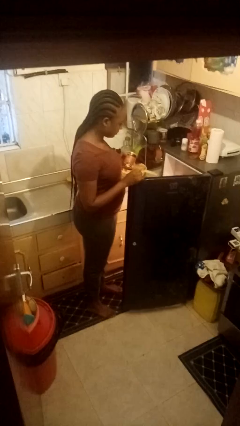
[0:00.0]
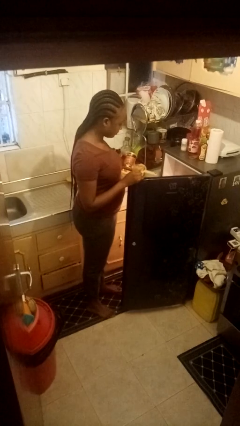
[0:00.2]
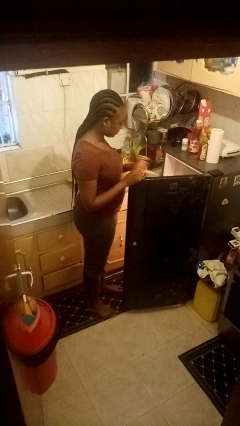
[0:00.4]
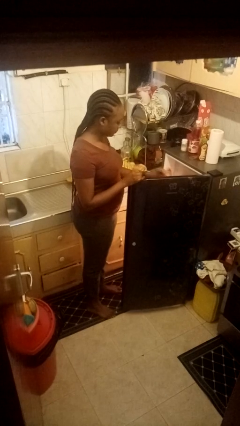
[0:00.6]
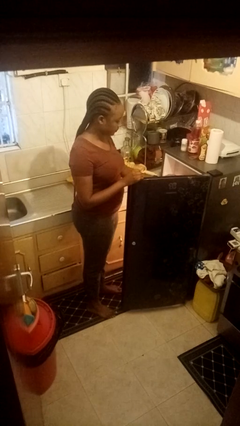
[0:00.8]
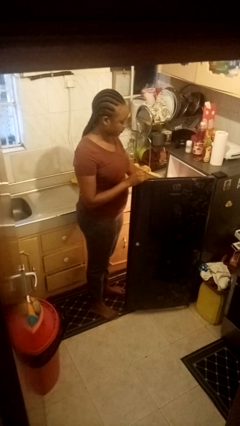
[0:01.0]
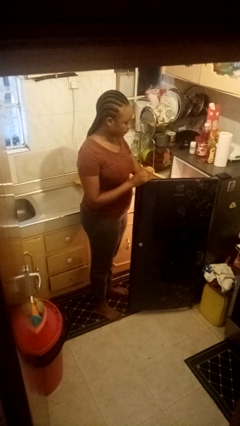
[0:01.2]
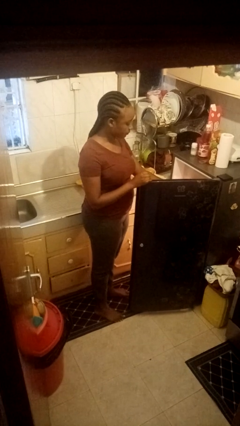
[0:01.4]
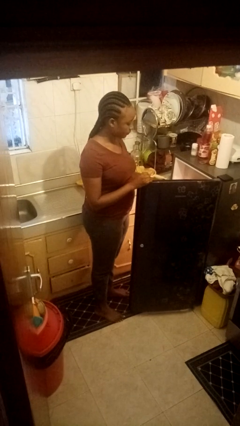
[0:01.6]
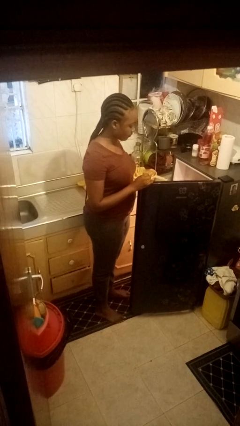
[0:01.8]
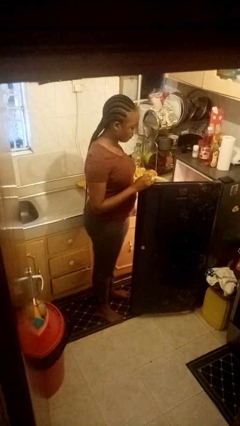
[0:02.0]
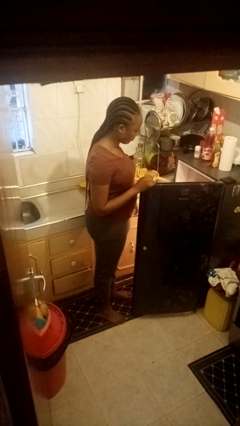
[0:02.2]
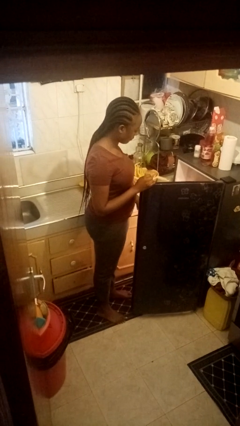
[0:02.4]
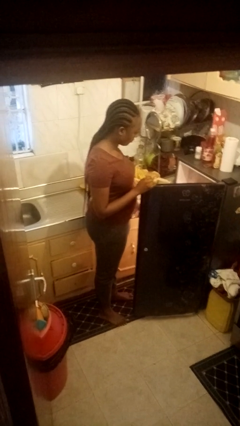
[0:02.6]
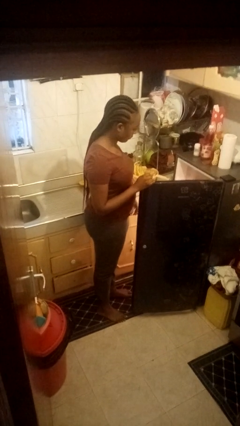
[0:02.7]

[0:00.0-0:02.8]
person puts object into refrigerator

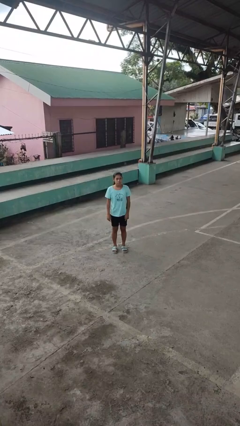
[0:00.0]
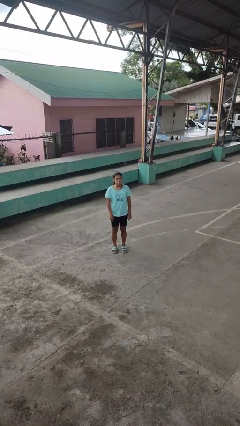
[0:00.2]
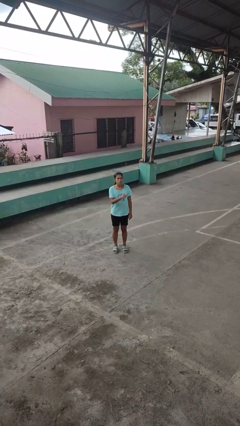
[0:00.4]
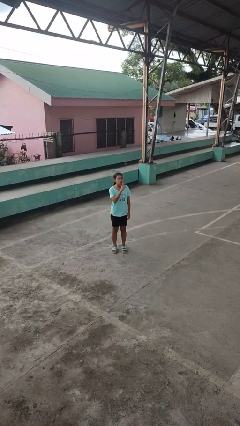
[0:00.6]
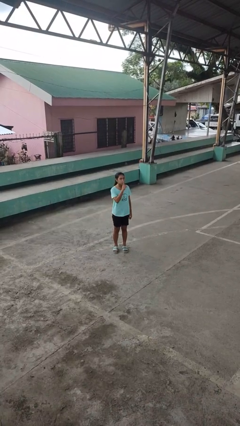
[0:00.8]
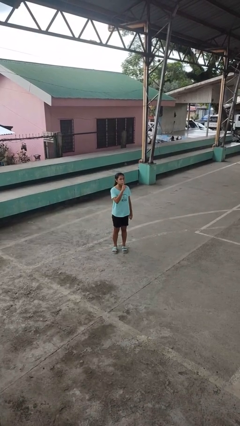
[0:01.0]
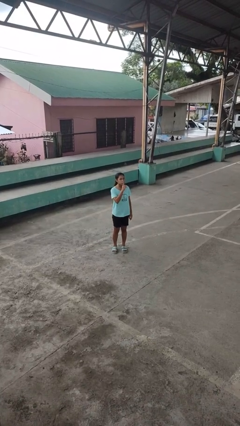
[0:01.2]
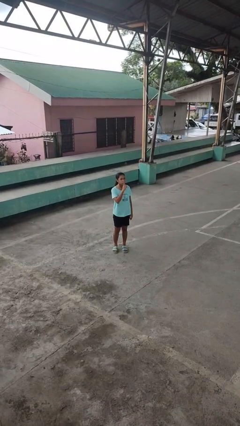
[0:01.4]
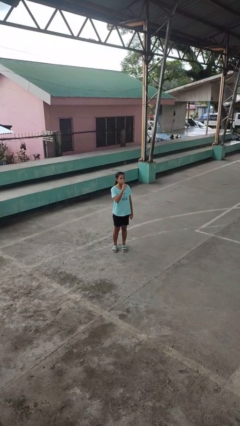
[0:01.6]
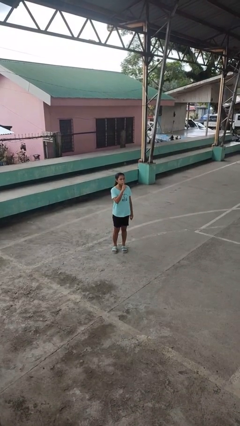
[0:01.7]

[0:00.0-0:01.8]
person gestures be quiet

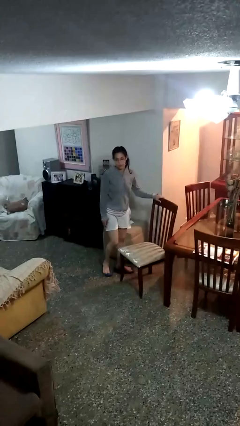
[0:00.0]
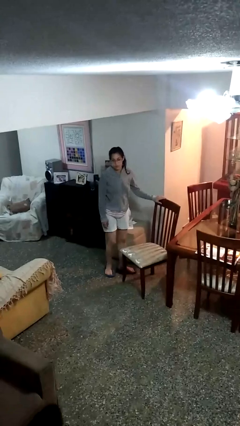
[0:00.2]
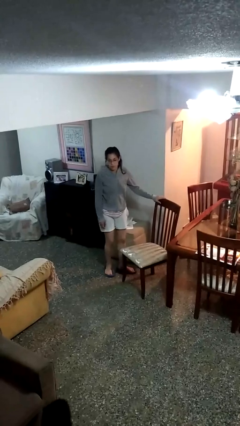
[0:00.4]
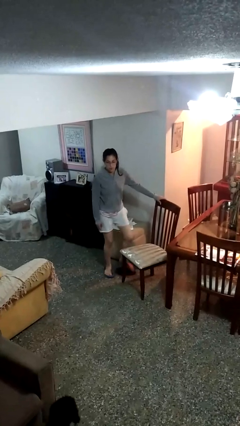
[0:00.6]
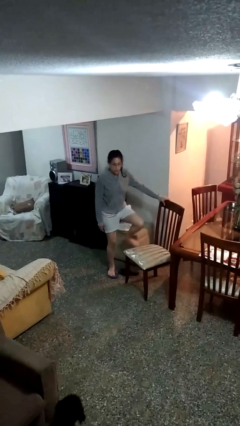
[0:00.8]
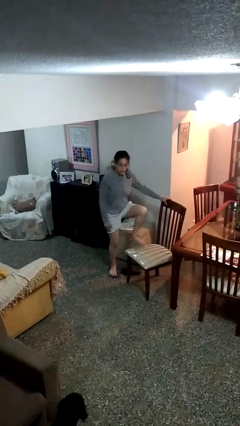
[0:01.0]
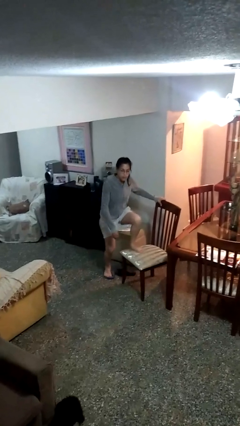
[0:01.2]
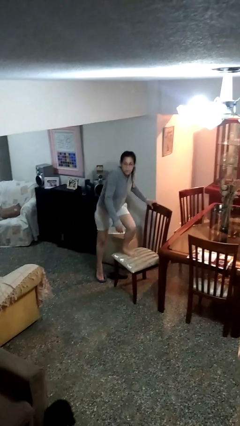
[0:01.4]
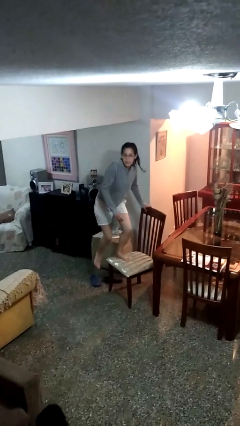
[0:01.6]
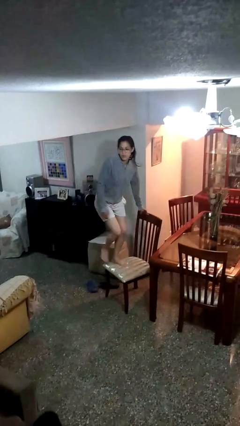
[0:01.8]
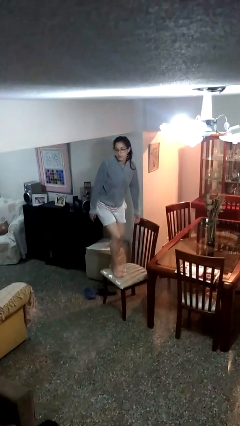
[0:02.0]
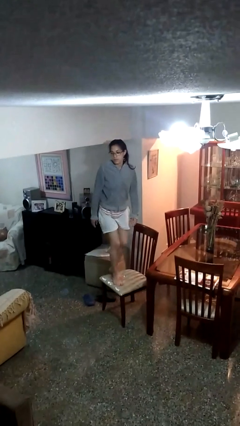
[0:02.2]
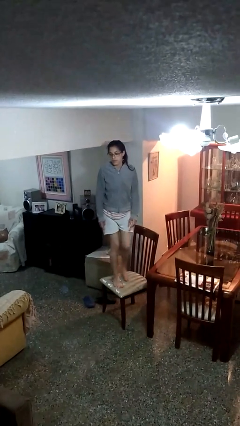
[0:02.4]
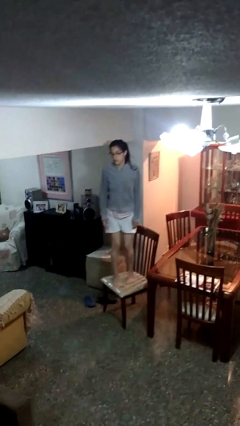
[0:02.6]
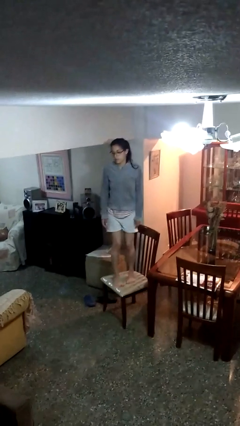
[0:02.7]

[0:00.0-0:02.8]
person climbs on chair

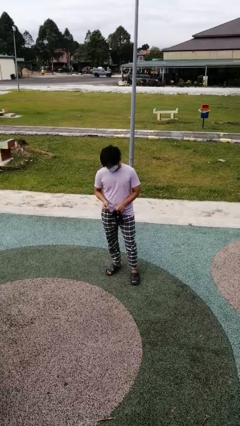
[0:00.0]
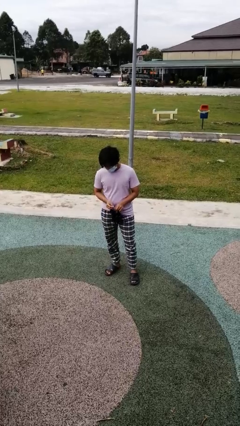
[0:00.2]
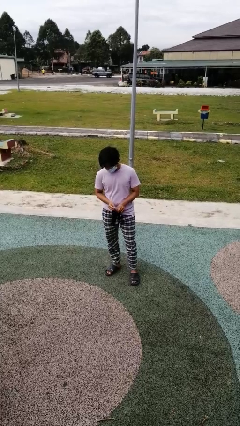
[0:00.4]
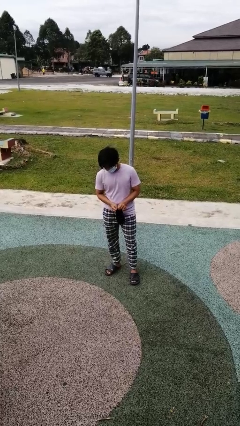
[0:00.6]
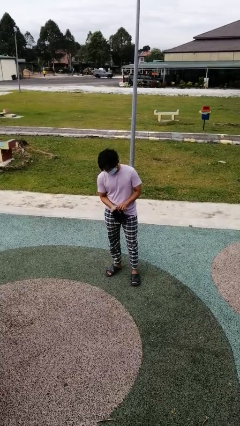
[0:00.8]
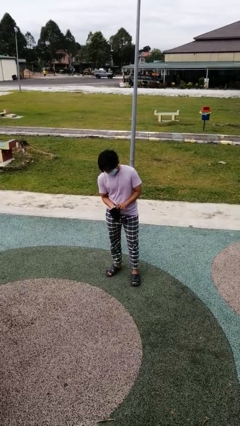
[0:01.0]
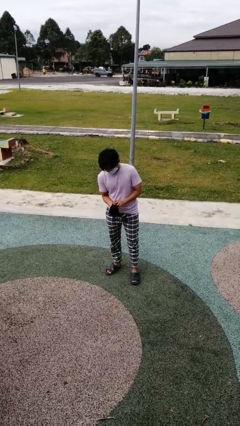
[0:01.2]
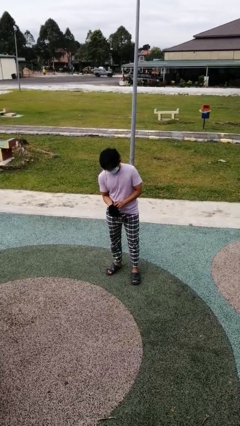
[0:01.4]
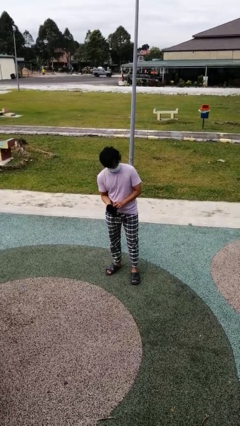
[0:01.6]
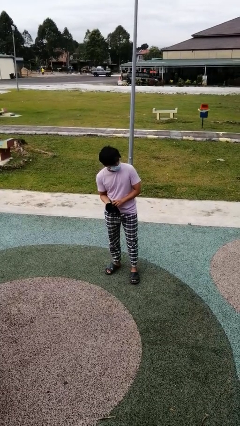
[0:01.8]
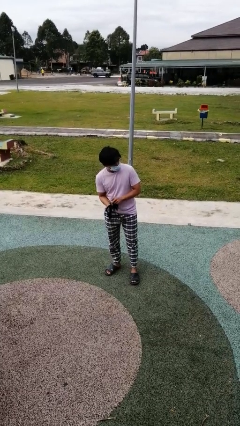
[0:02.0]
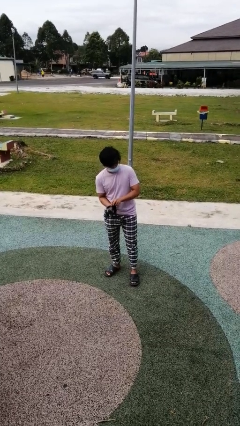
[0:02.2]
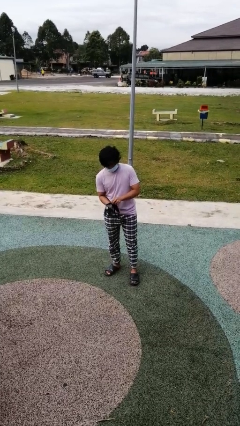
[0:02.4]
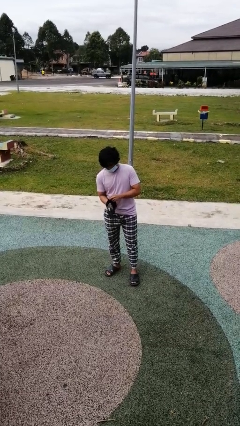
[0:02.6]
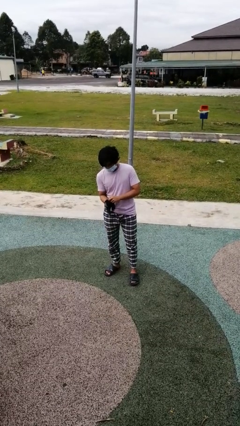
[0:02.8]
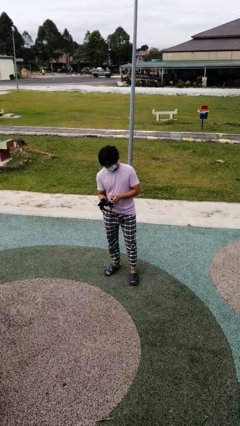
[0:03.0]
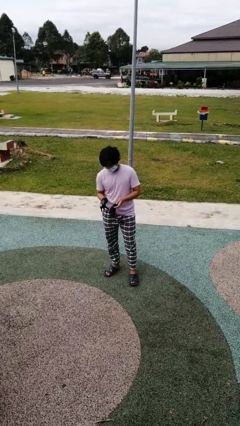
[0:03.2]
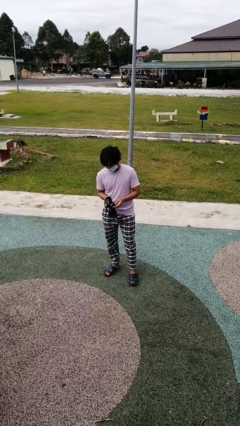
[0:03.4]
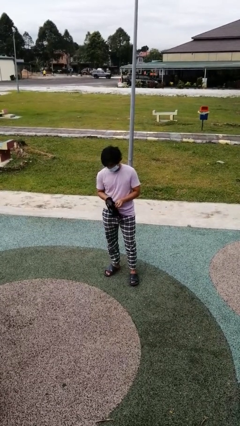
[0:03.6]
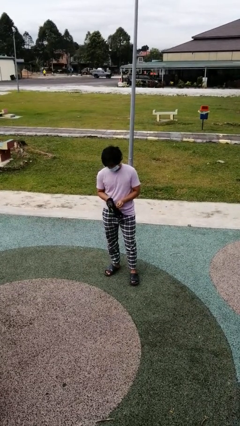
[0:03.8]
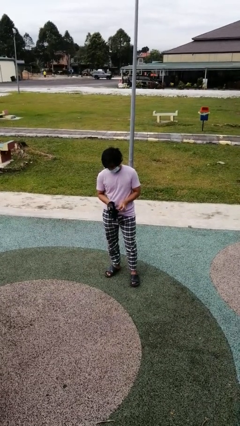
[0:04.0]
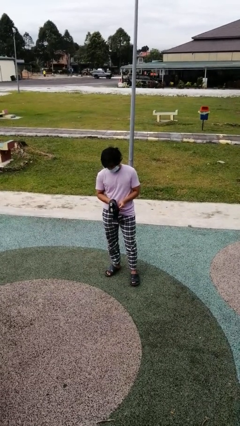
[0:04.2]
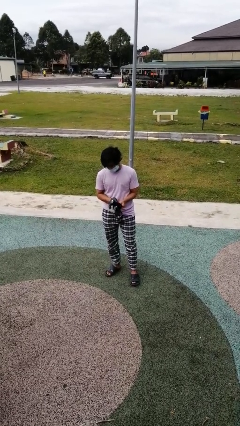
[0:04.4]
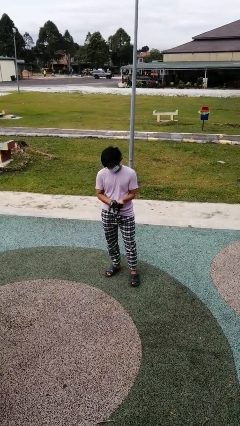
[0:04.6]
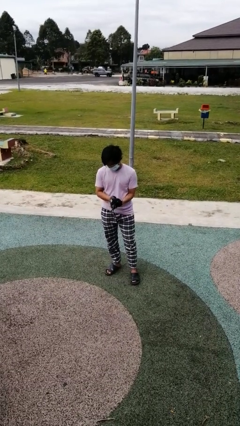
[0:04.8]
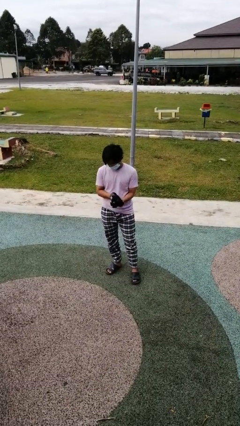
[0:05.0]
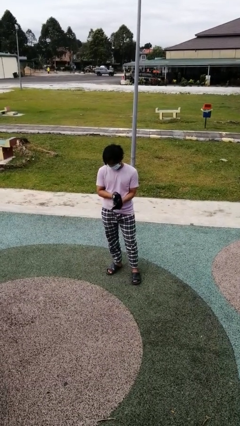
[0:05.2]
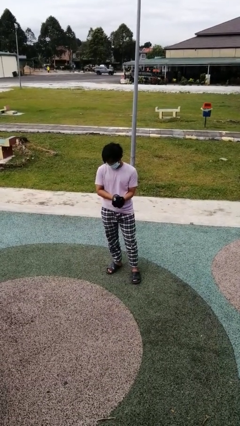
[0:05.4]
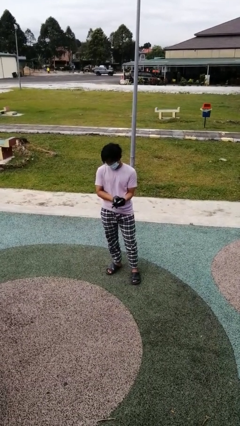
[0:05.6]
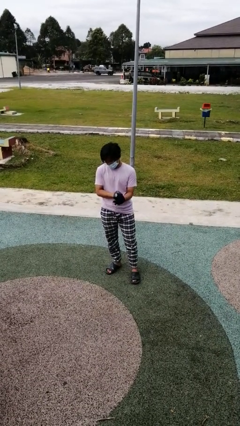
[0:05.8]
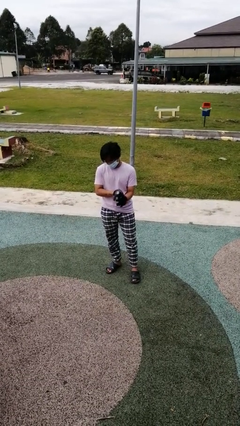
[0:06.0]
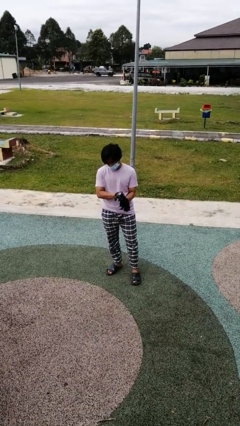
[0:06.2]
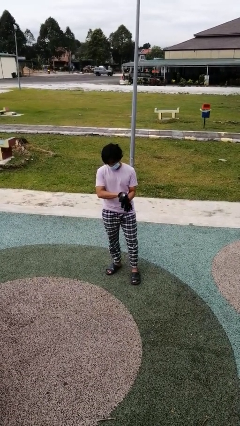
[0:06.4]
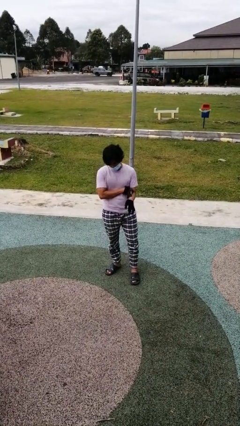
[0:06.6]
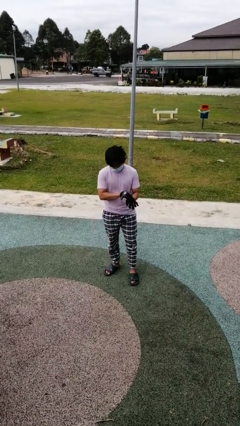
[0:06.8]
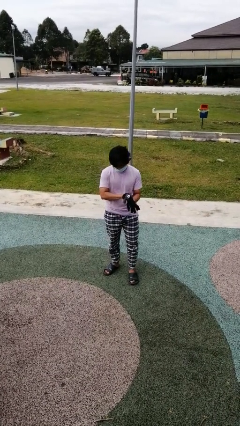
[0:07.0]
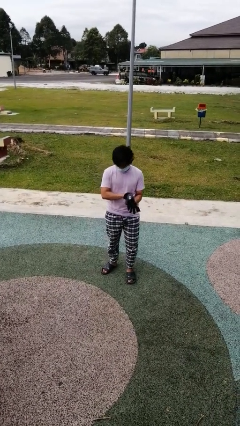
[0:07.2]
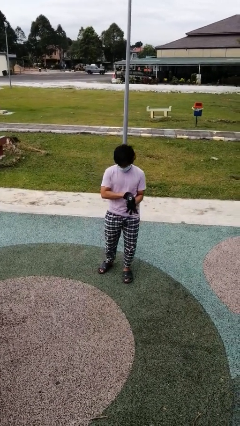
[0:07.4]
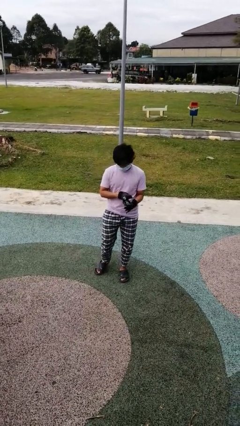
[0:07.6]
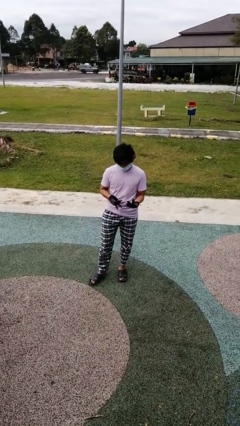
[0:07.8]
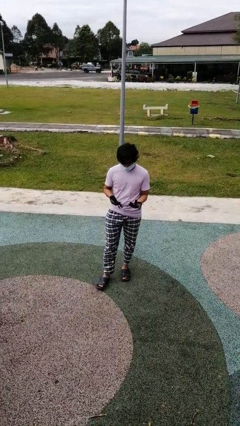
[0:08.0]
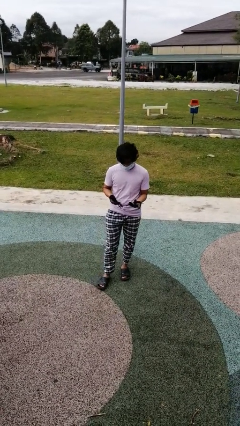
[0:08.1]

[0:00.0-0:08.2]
person puts on gloves

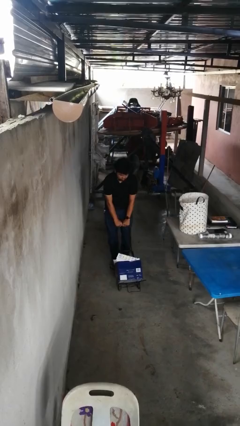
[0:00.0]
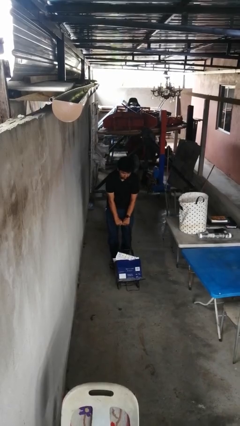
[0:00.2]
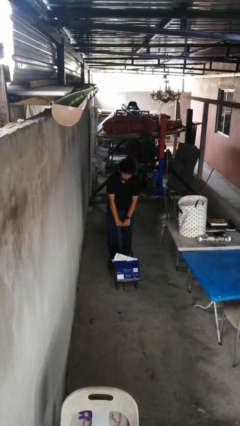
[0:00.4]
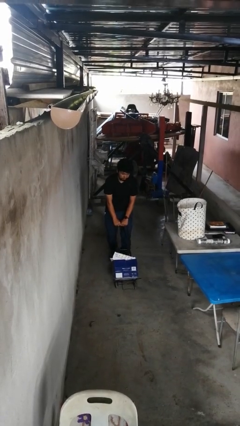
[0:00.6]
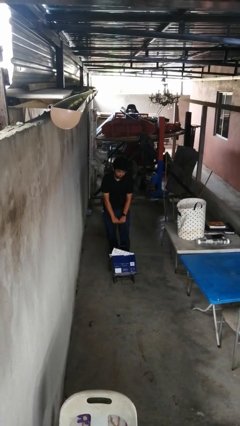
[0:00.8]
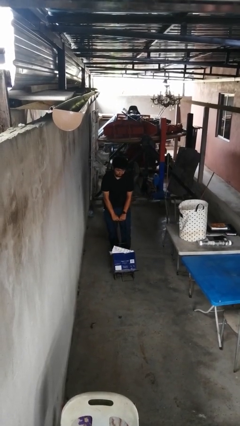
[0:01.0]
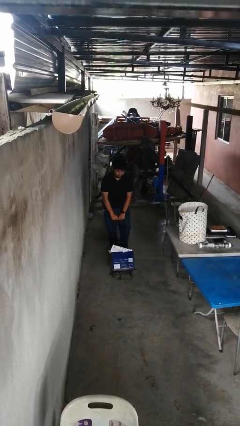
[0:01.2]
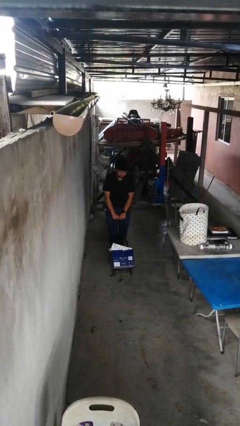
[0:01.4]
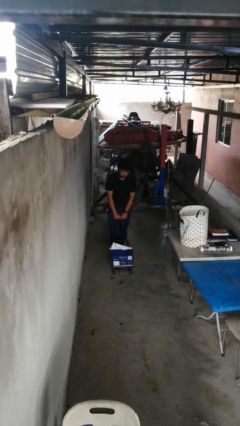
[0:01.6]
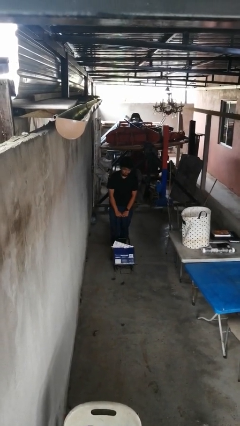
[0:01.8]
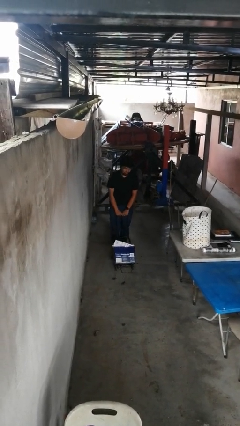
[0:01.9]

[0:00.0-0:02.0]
person pulls wheeled cart
